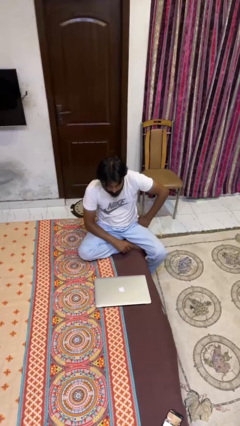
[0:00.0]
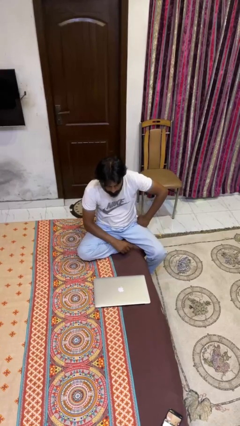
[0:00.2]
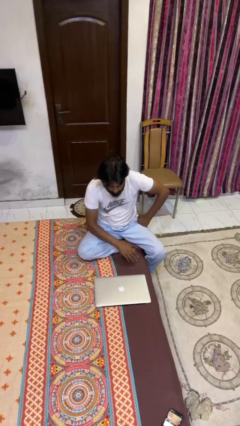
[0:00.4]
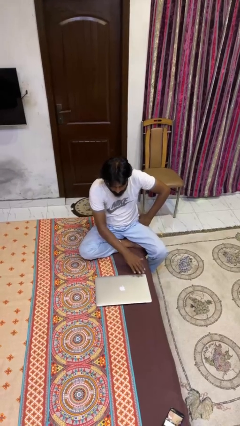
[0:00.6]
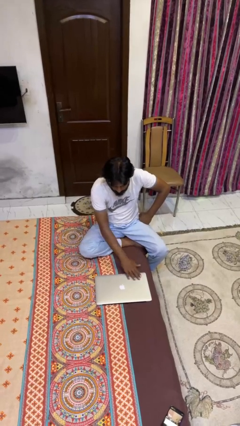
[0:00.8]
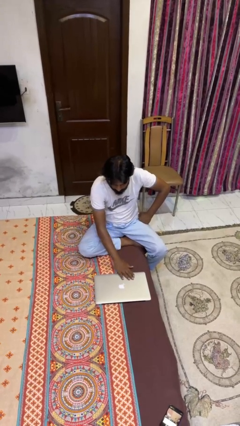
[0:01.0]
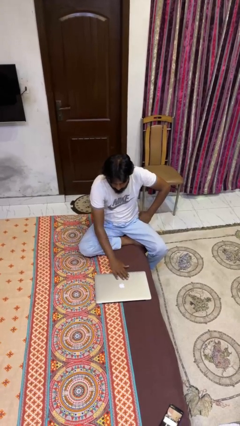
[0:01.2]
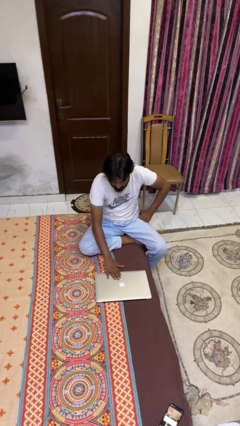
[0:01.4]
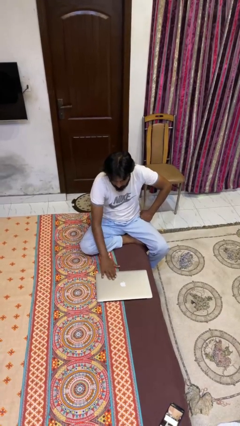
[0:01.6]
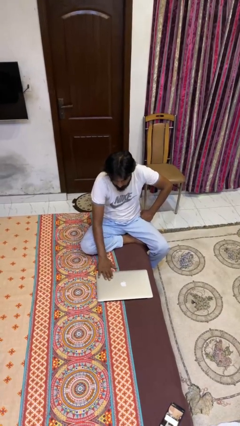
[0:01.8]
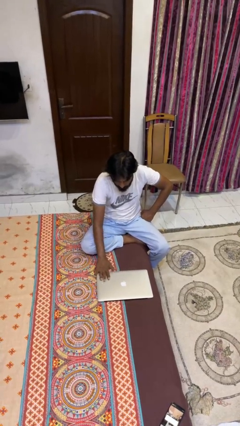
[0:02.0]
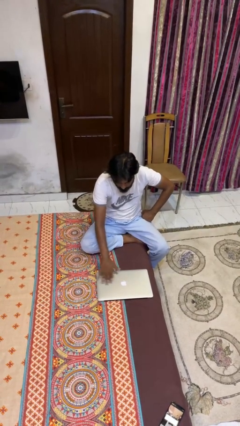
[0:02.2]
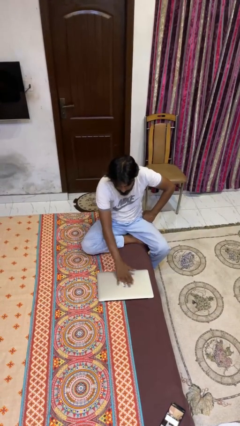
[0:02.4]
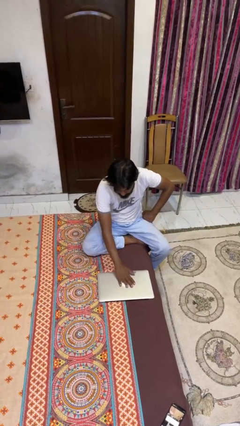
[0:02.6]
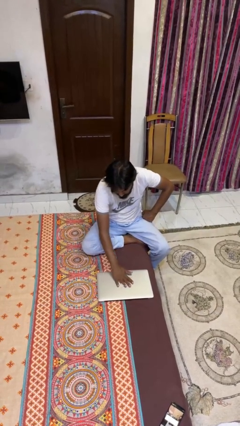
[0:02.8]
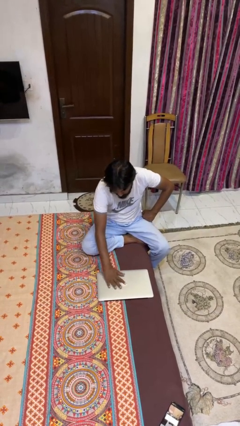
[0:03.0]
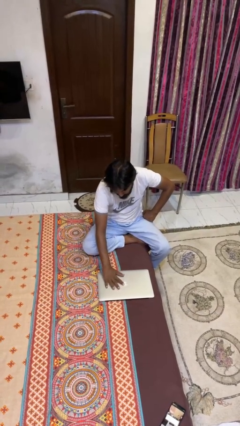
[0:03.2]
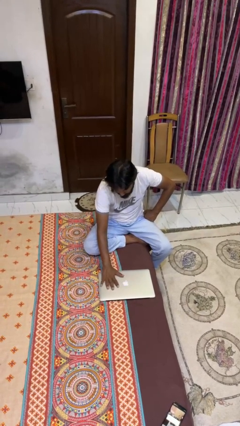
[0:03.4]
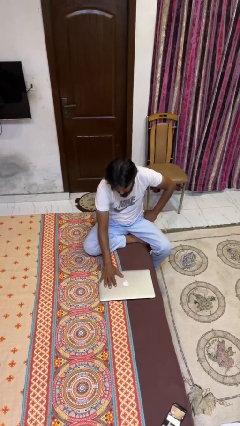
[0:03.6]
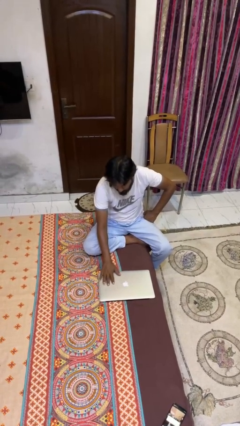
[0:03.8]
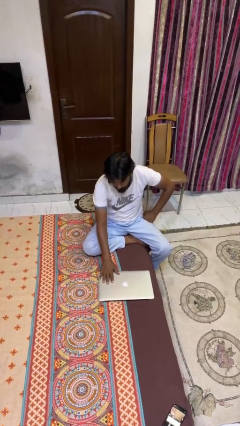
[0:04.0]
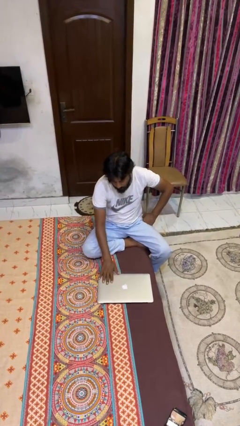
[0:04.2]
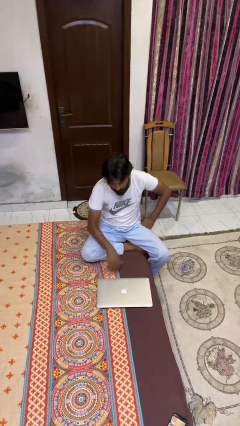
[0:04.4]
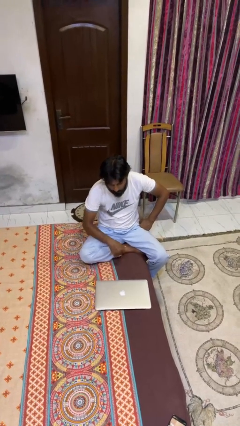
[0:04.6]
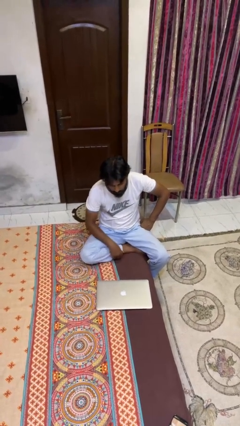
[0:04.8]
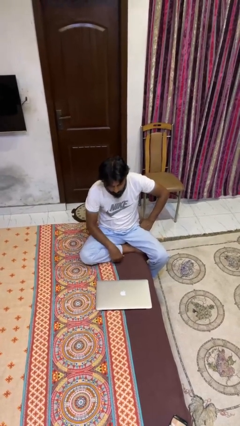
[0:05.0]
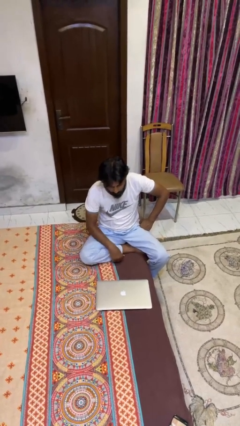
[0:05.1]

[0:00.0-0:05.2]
person waves hand over object

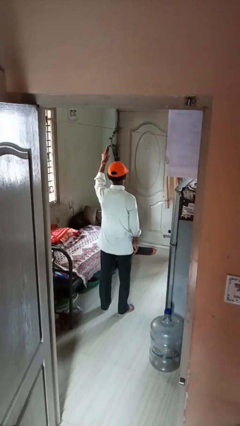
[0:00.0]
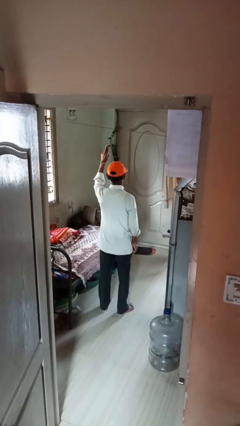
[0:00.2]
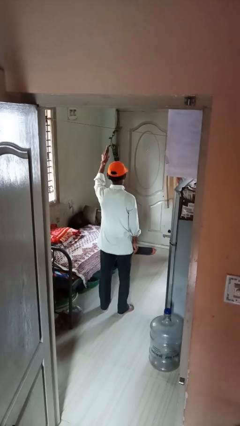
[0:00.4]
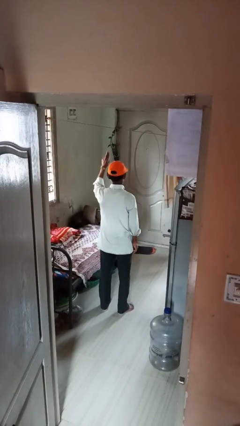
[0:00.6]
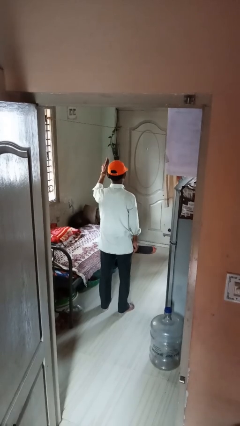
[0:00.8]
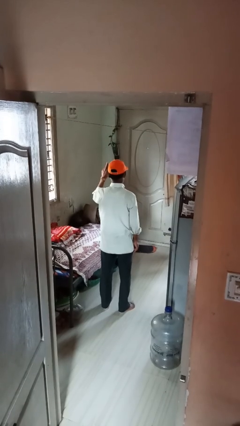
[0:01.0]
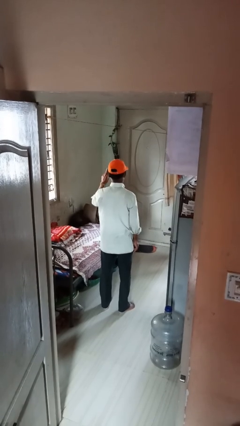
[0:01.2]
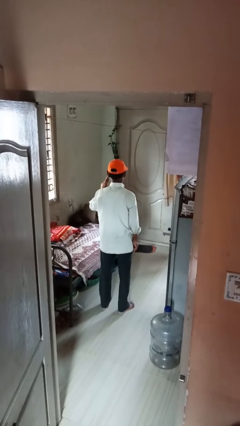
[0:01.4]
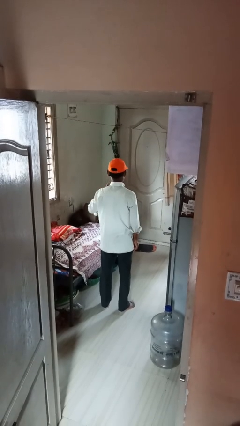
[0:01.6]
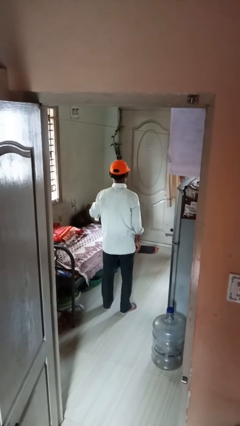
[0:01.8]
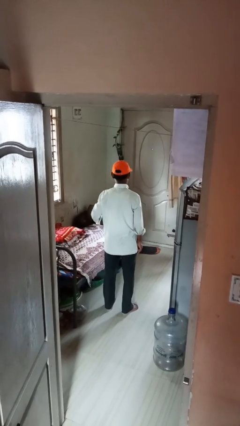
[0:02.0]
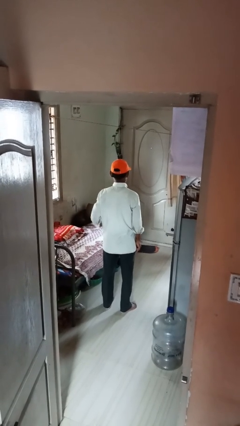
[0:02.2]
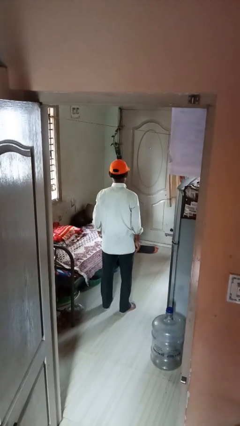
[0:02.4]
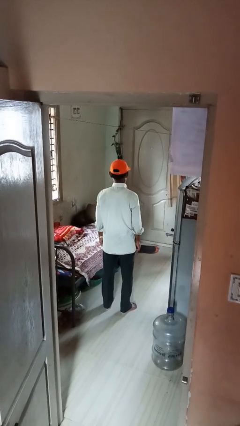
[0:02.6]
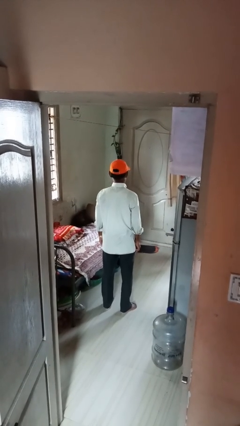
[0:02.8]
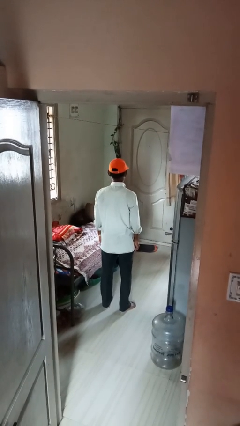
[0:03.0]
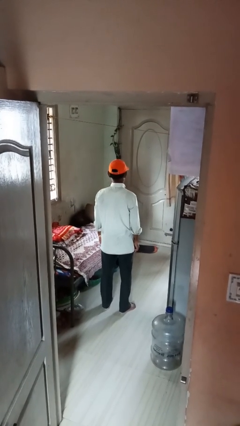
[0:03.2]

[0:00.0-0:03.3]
person gestures swipe down

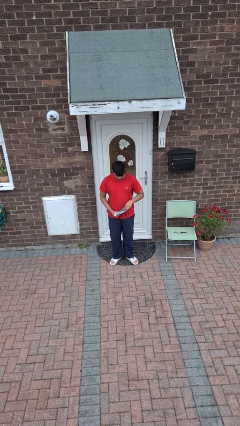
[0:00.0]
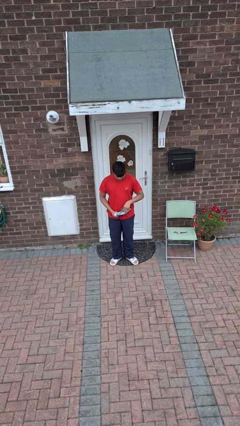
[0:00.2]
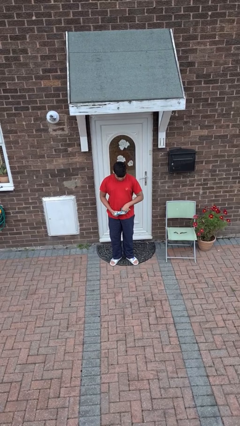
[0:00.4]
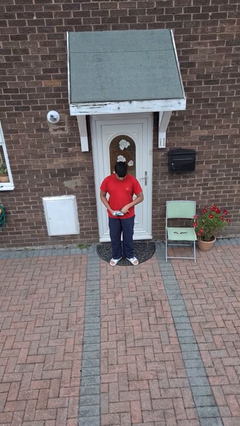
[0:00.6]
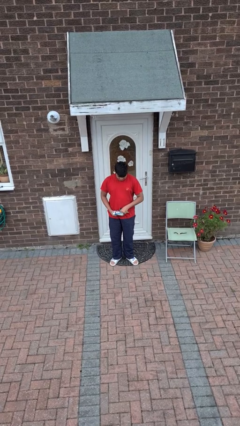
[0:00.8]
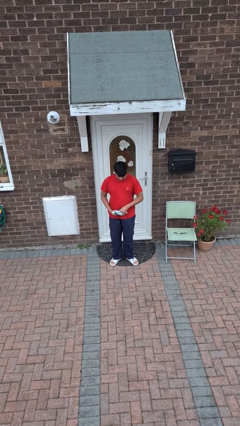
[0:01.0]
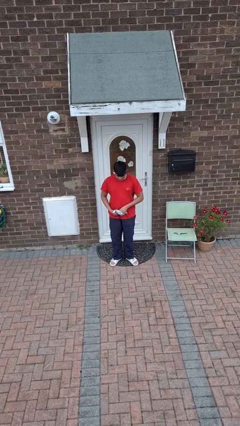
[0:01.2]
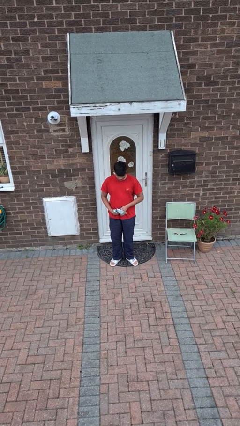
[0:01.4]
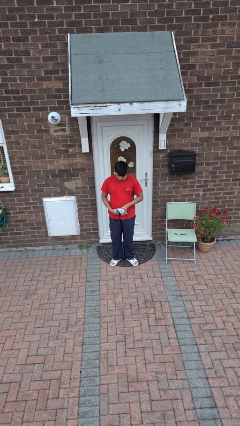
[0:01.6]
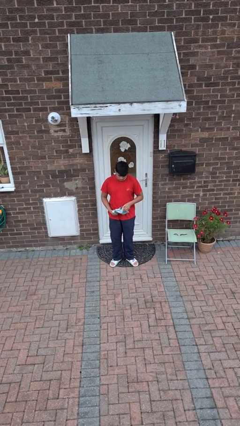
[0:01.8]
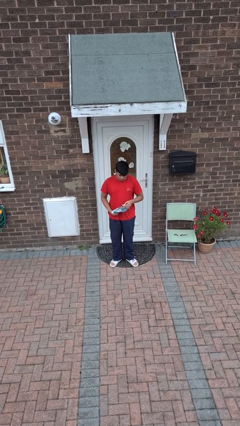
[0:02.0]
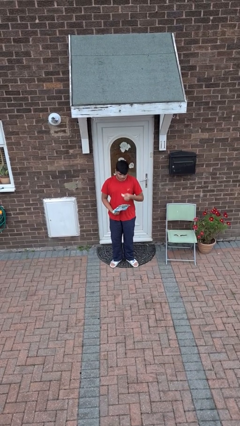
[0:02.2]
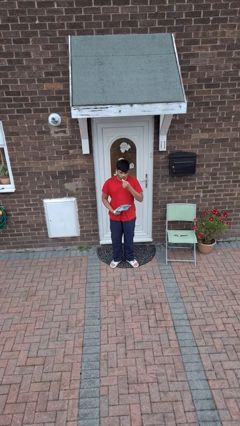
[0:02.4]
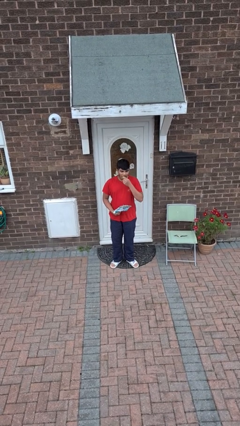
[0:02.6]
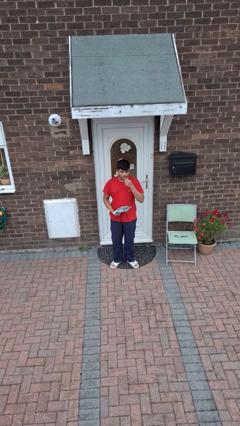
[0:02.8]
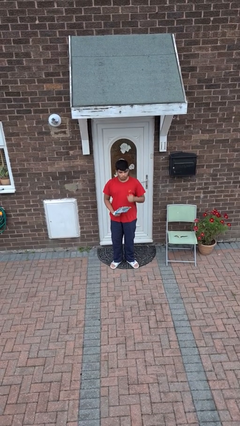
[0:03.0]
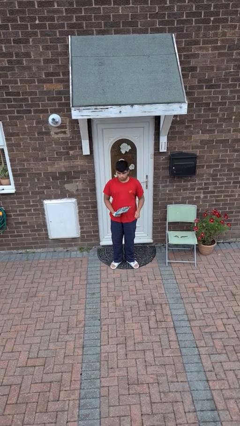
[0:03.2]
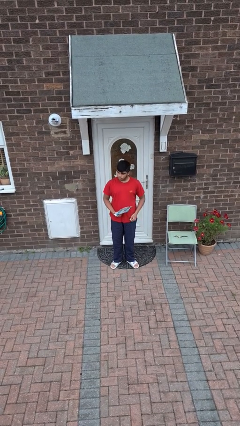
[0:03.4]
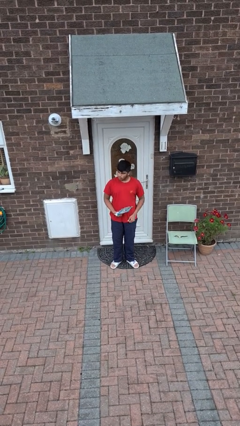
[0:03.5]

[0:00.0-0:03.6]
person eats snack from bag

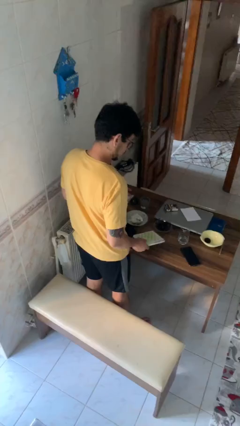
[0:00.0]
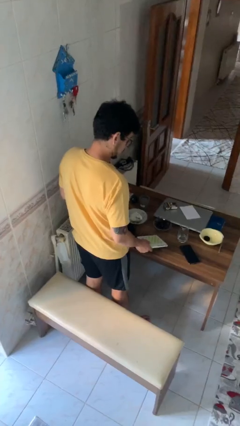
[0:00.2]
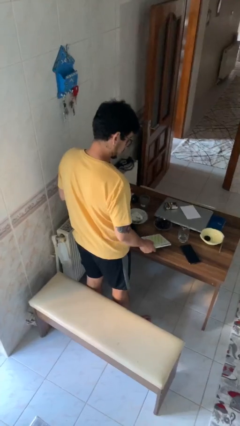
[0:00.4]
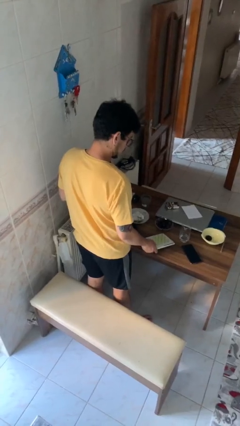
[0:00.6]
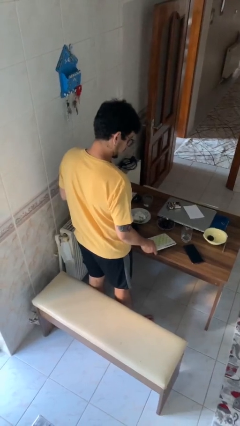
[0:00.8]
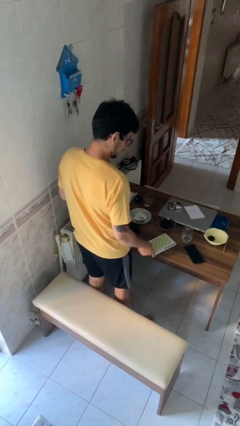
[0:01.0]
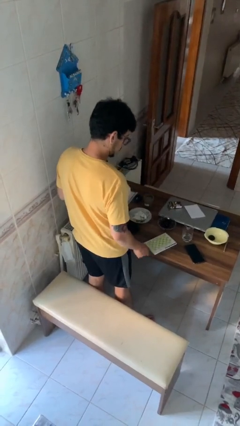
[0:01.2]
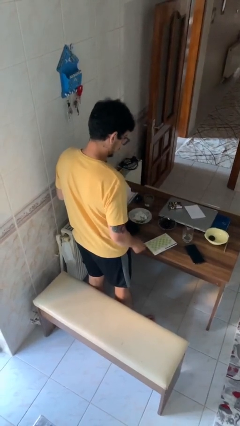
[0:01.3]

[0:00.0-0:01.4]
person puts down object on table

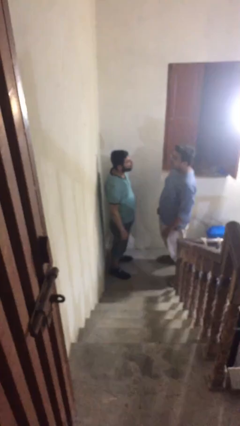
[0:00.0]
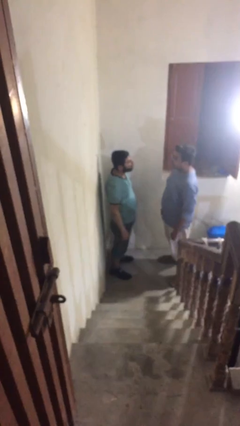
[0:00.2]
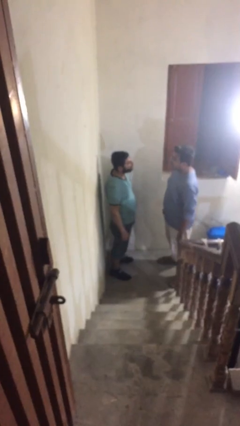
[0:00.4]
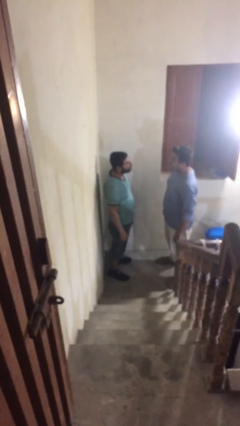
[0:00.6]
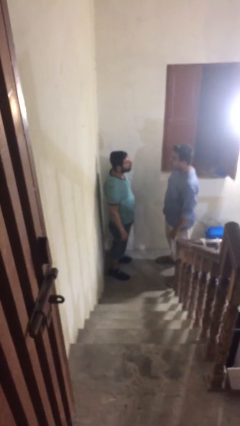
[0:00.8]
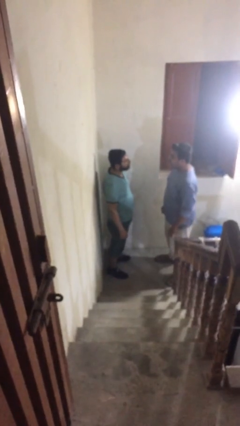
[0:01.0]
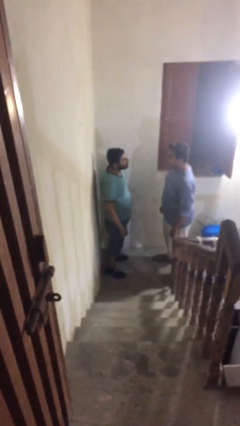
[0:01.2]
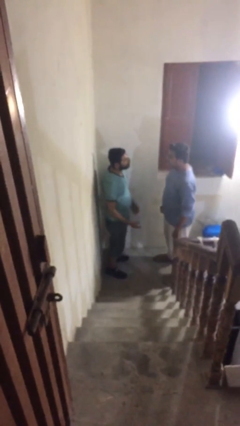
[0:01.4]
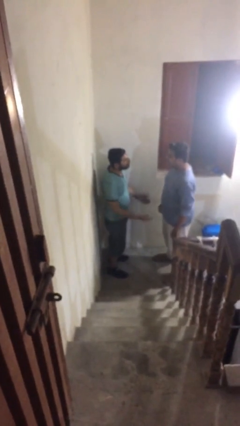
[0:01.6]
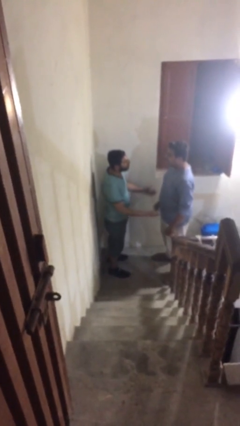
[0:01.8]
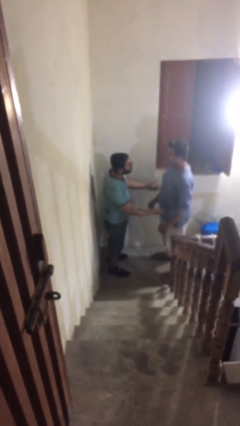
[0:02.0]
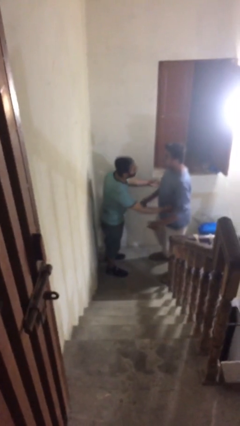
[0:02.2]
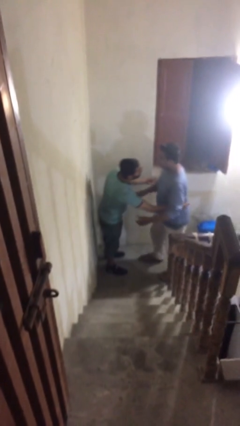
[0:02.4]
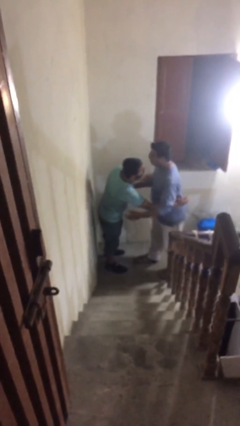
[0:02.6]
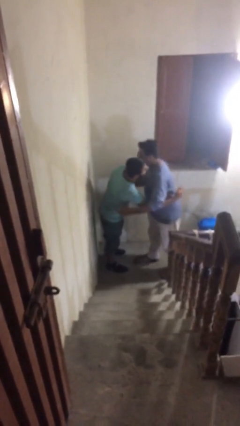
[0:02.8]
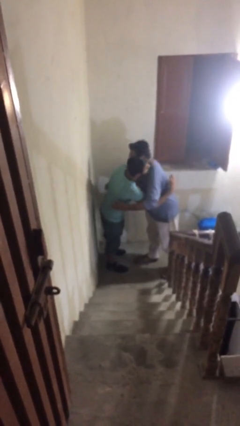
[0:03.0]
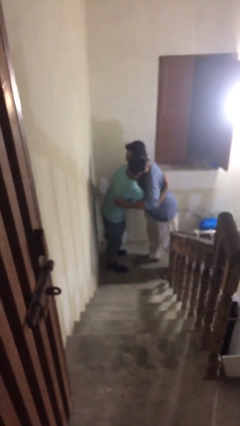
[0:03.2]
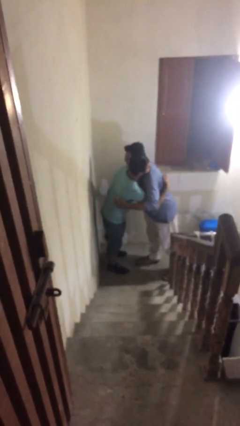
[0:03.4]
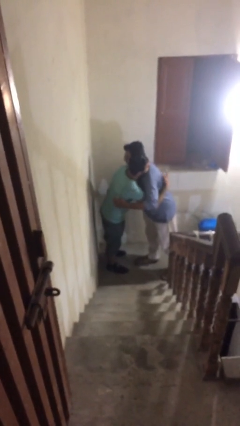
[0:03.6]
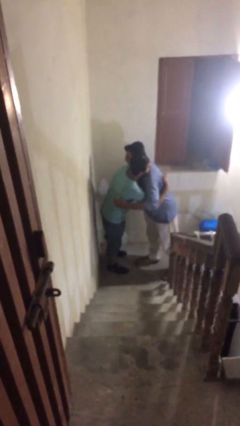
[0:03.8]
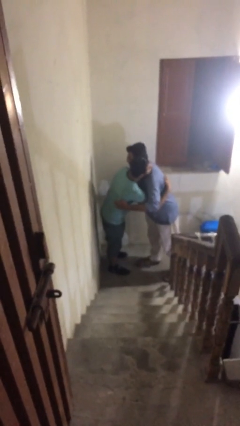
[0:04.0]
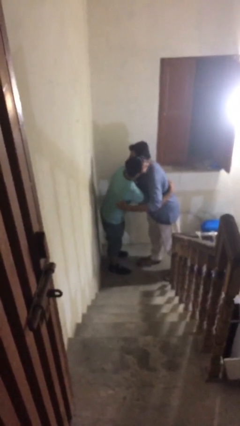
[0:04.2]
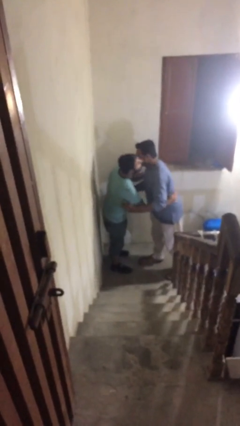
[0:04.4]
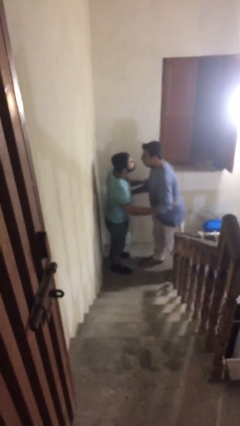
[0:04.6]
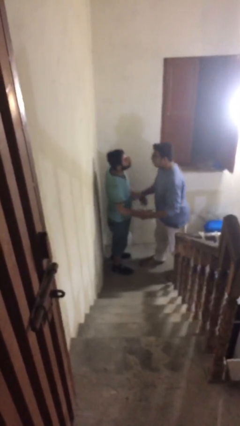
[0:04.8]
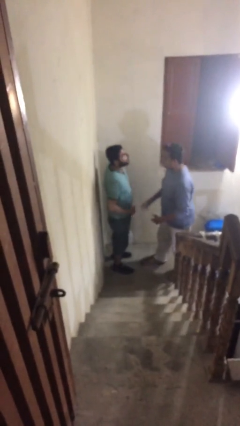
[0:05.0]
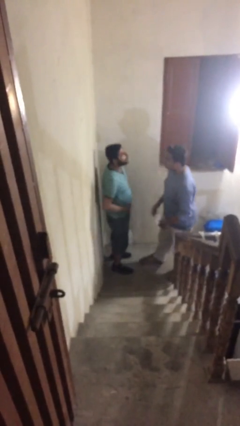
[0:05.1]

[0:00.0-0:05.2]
person embraces person
